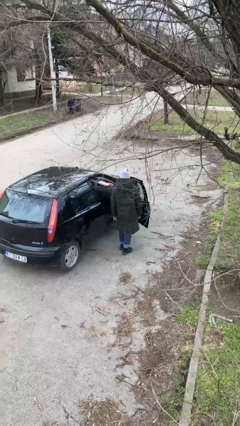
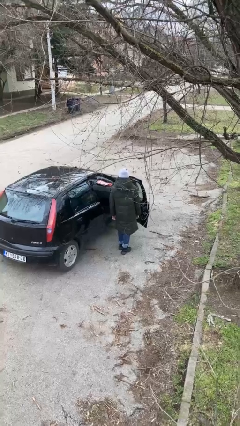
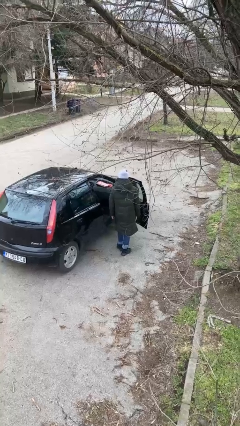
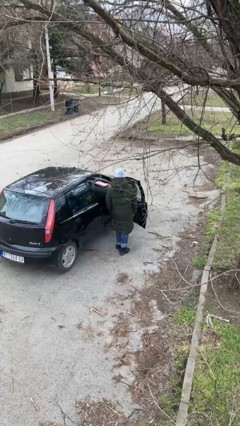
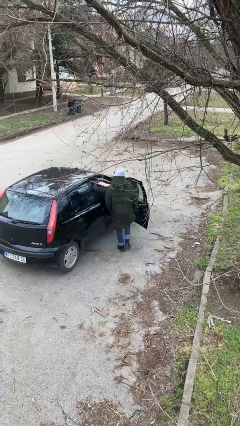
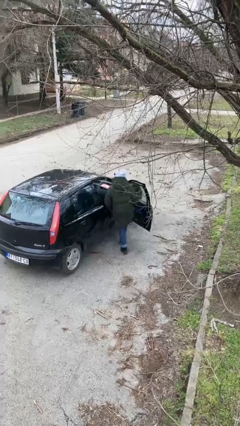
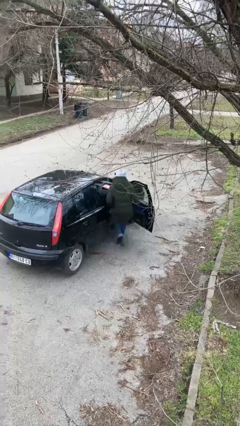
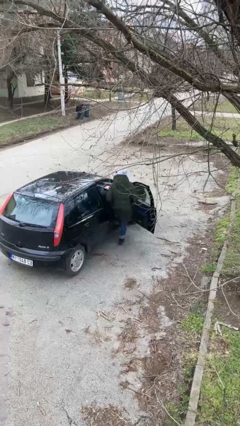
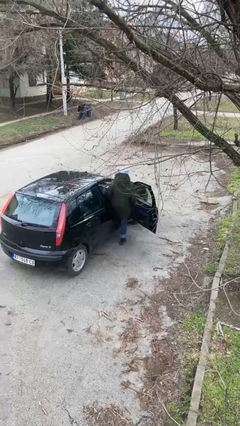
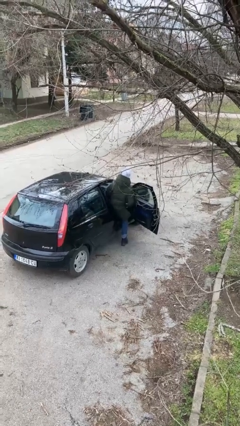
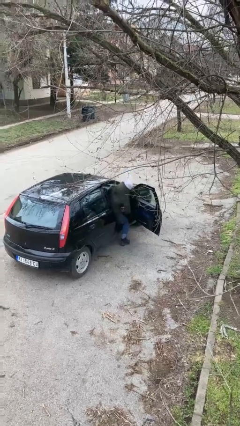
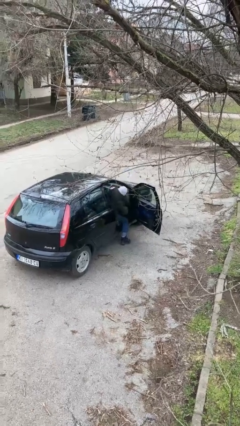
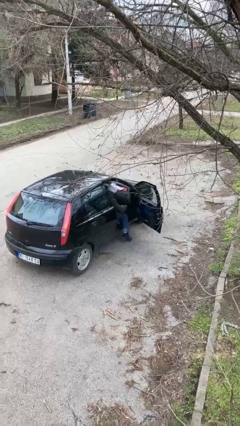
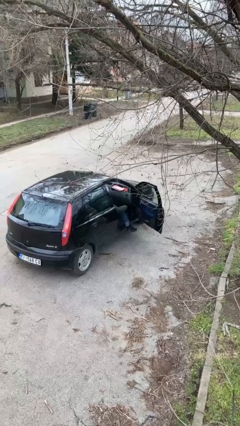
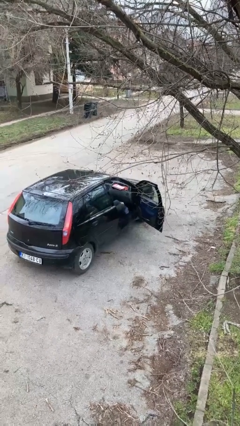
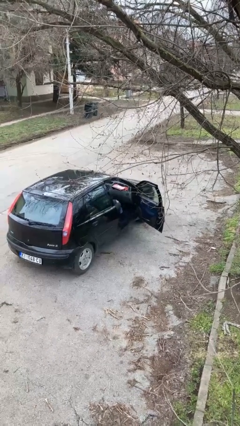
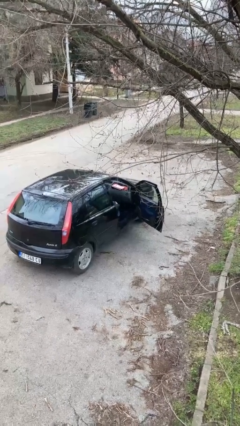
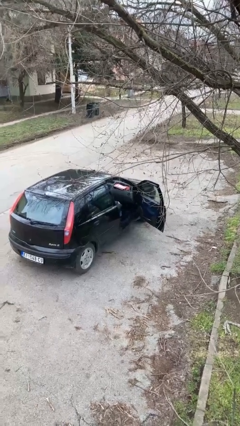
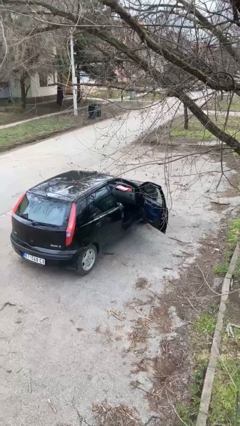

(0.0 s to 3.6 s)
person enters car

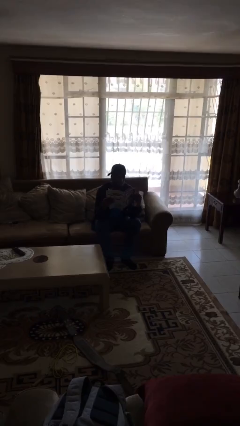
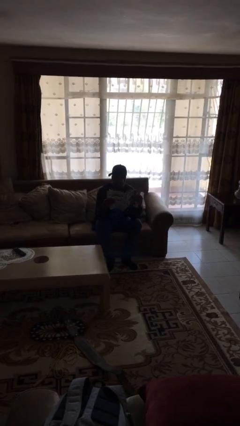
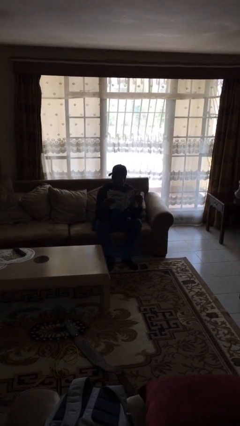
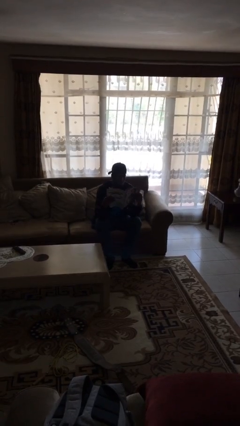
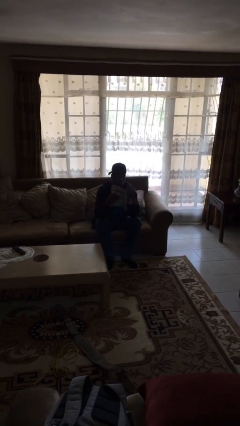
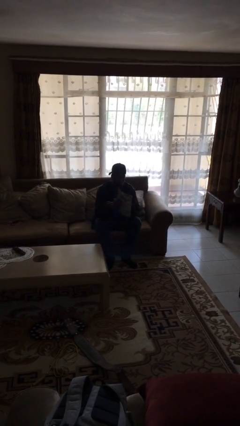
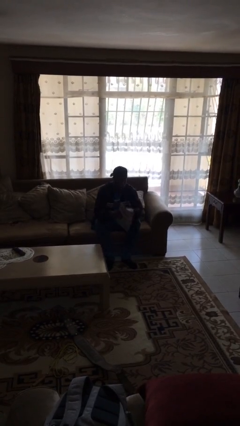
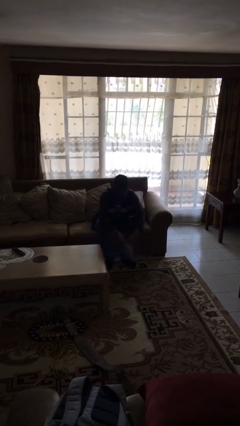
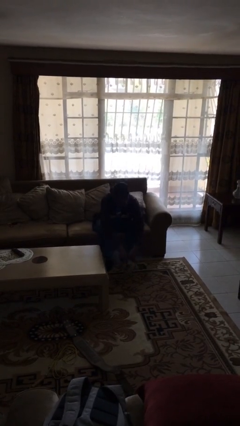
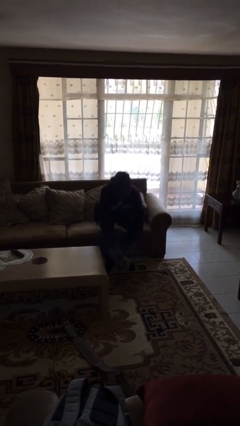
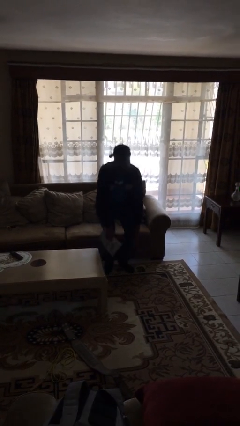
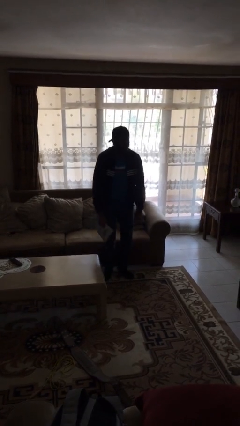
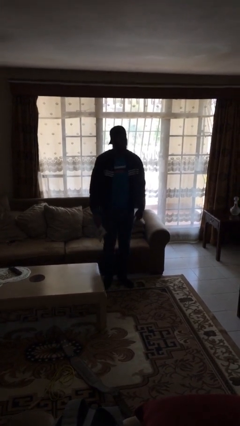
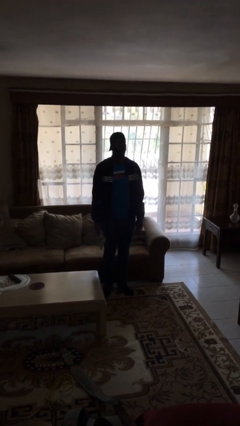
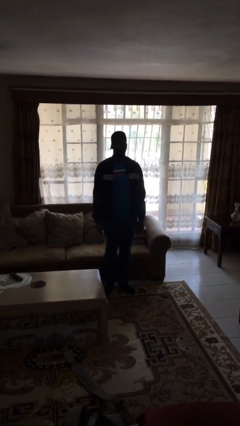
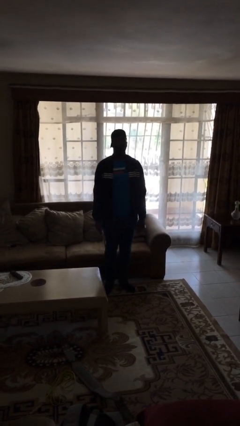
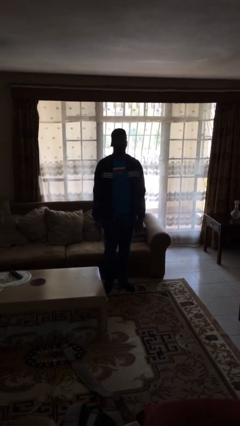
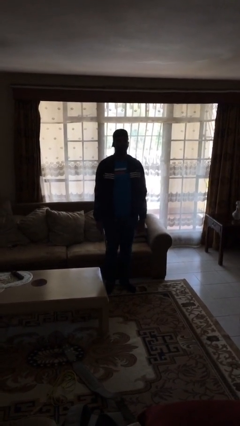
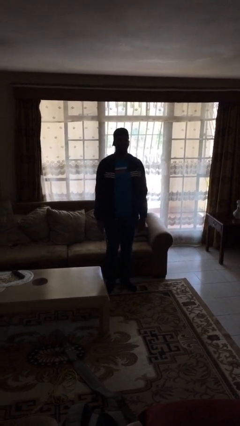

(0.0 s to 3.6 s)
person stands up

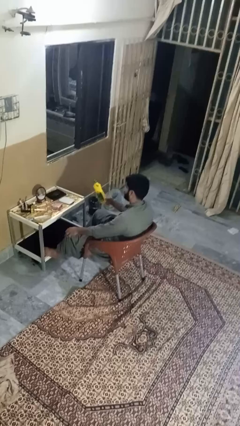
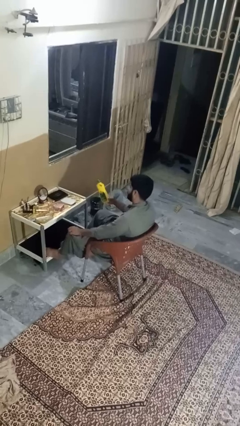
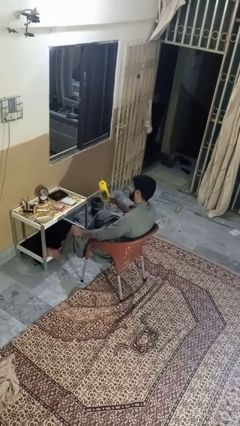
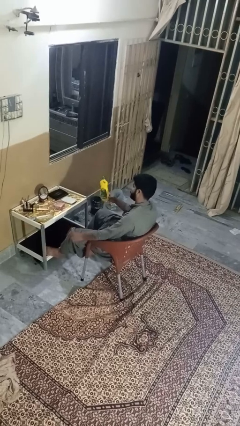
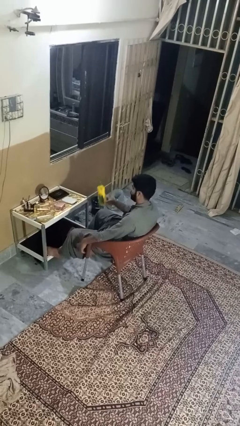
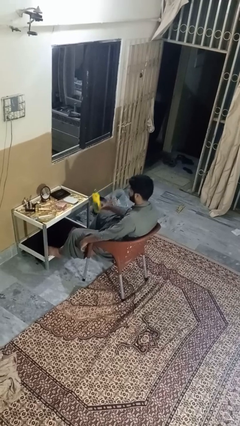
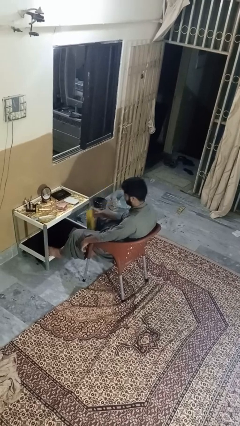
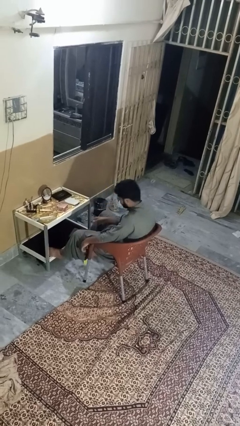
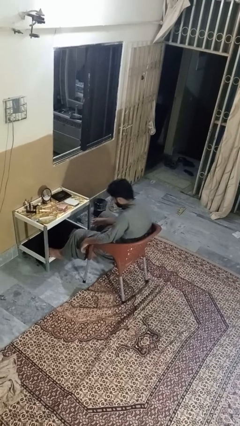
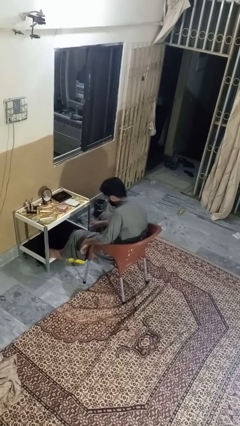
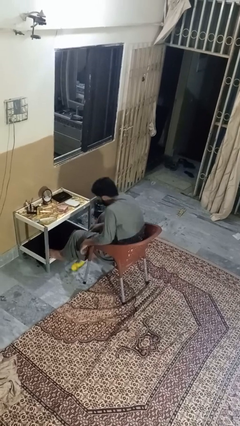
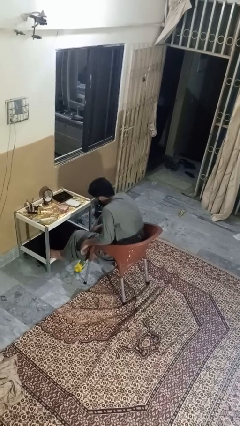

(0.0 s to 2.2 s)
person throws object to ground

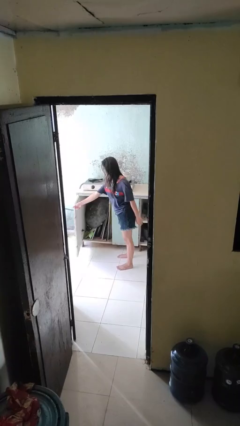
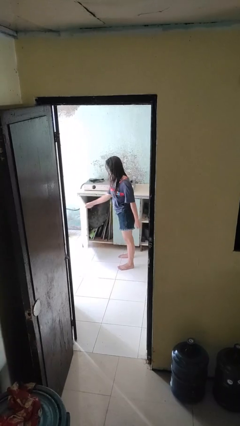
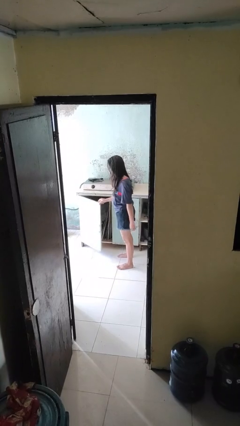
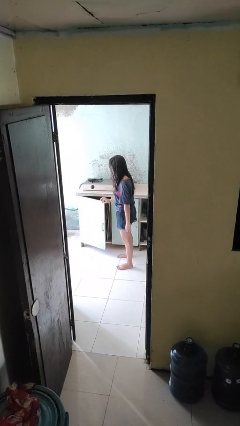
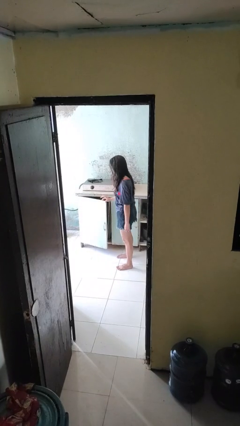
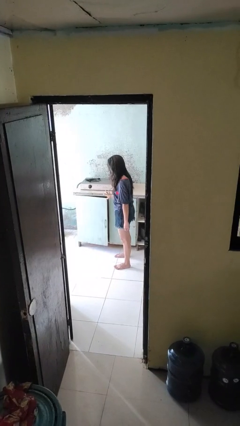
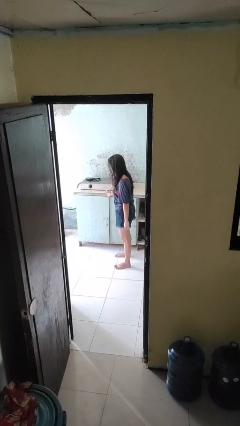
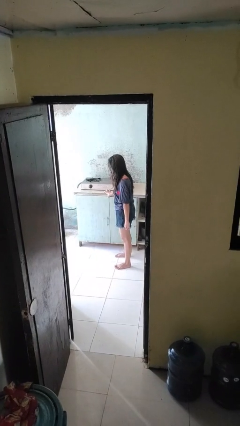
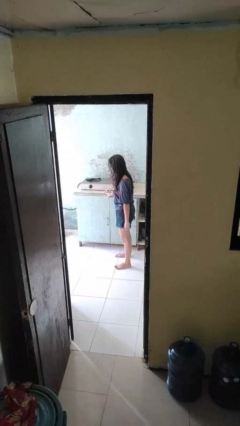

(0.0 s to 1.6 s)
person closes cabinet

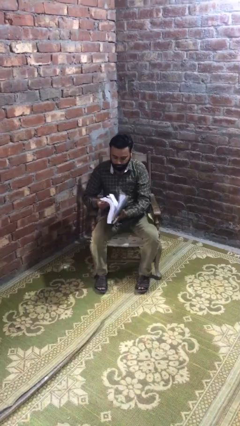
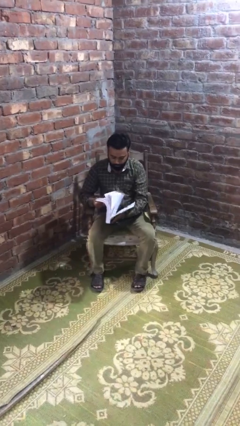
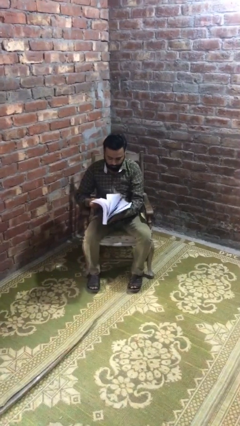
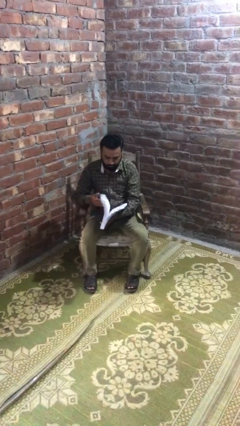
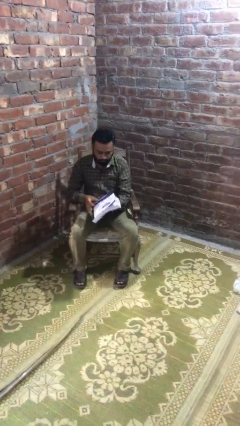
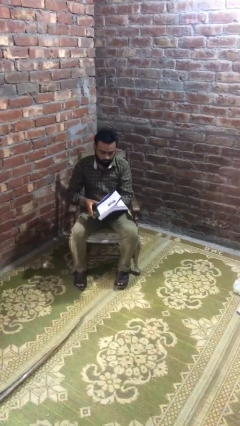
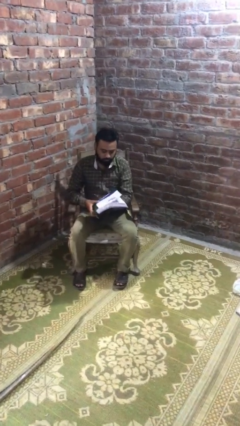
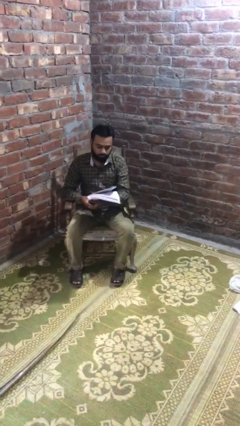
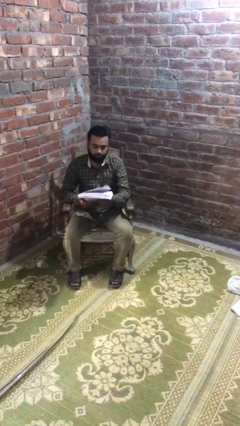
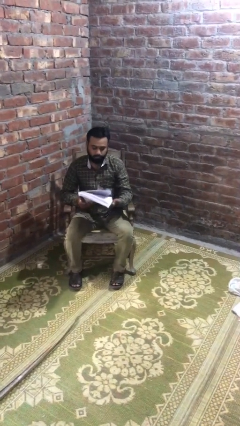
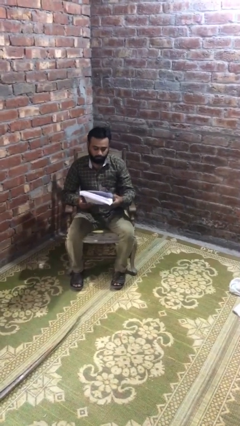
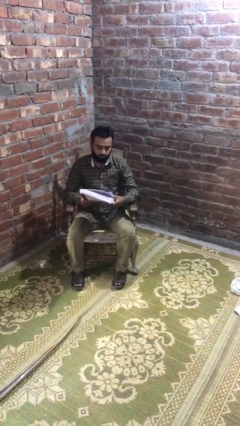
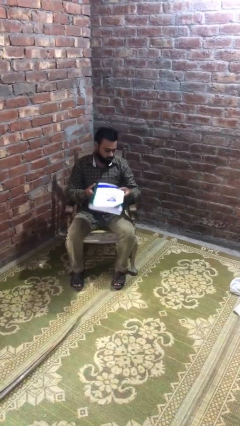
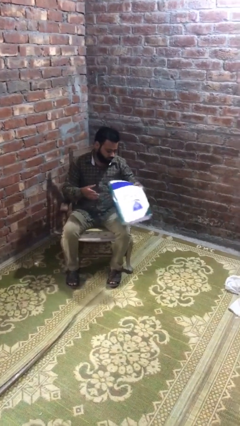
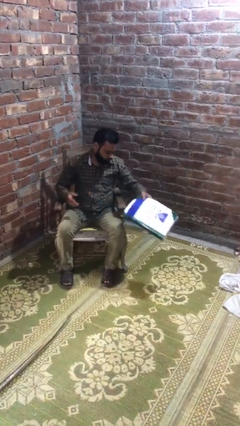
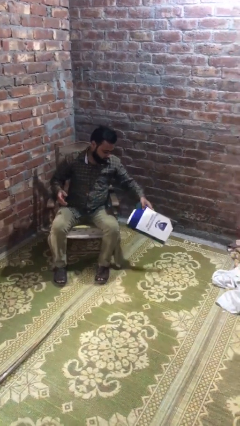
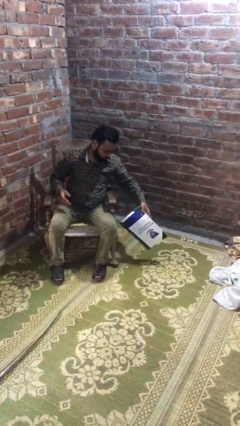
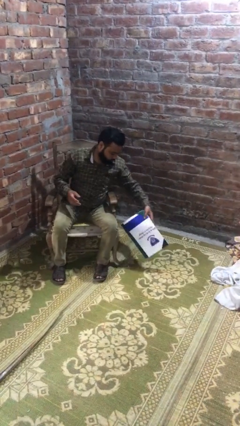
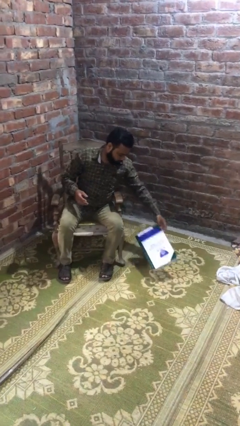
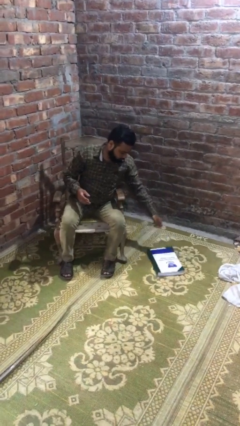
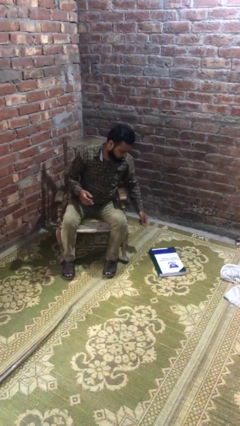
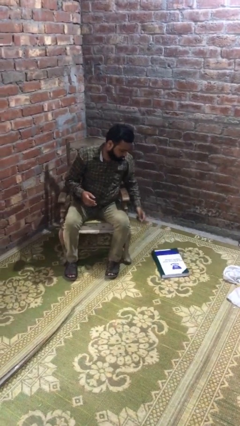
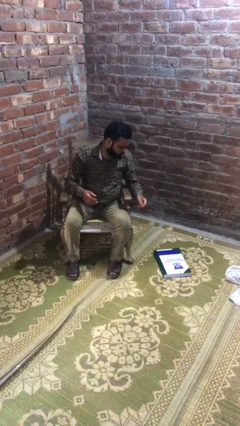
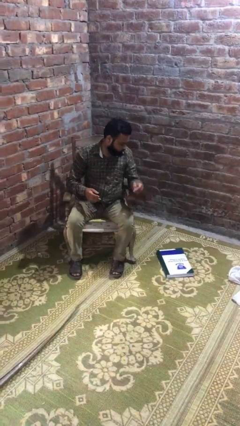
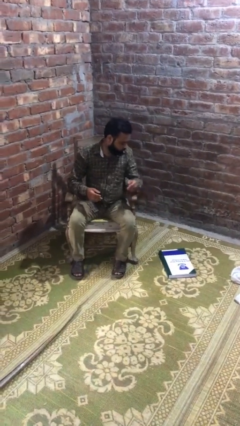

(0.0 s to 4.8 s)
person puts down object on floor

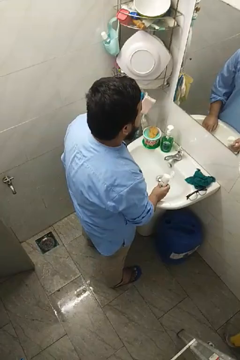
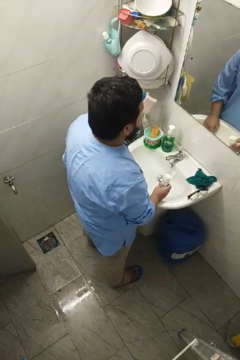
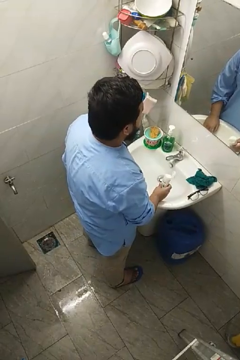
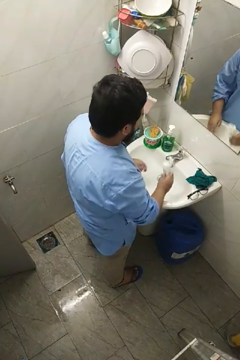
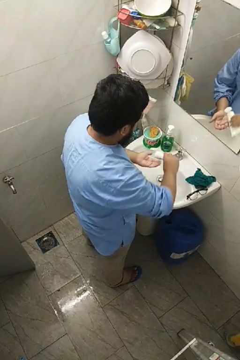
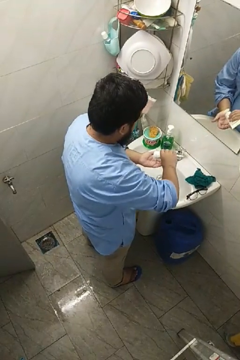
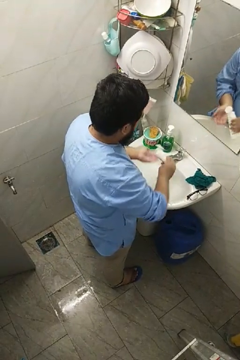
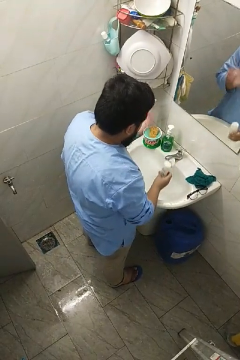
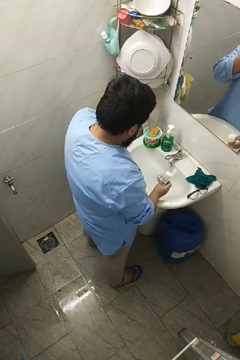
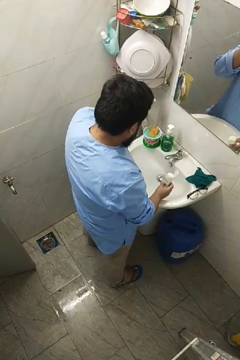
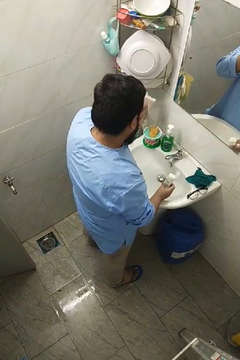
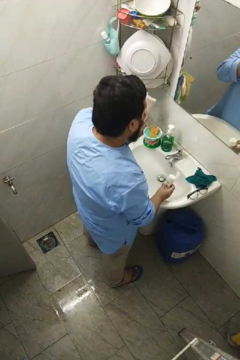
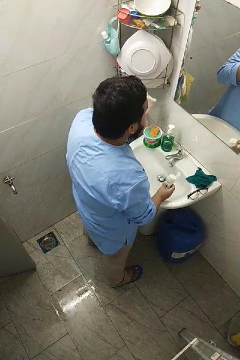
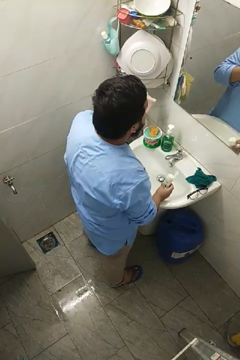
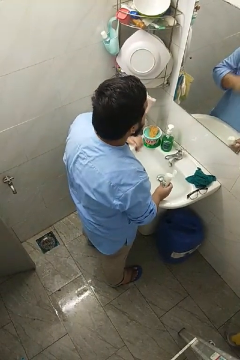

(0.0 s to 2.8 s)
person applies facial moisturizer
